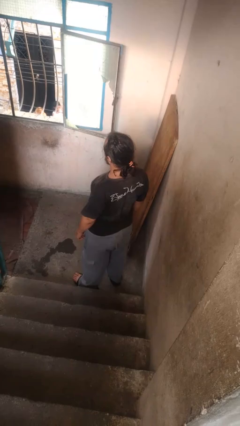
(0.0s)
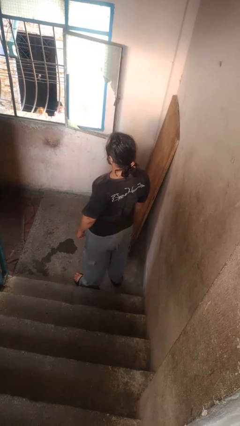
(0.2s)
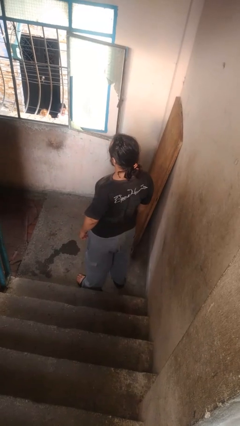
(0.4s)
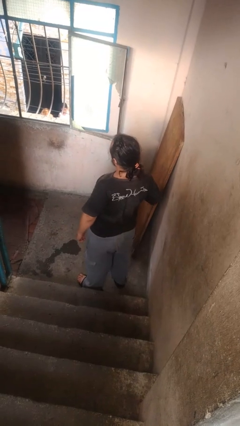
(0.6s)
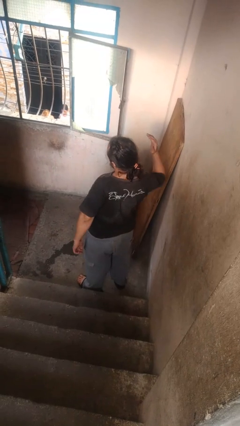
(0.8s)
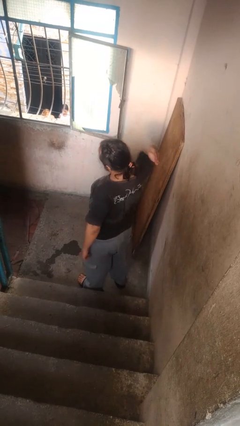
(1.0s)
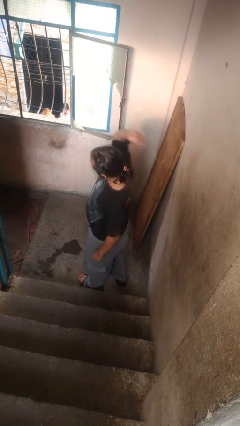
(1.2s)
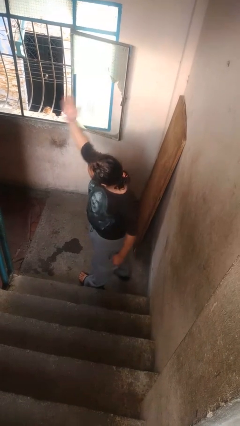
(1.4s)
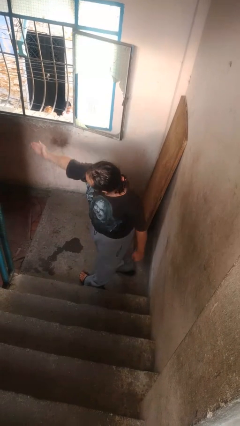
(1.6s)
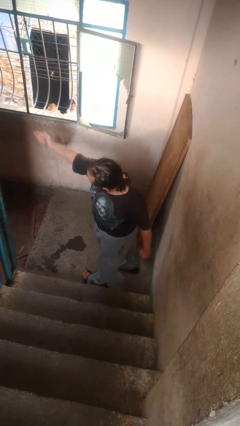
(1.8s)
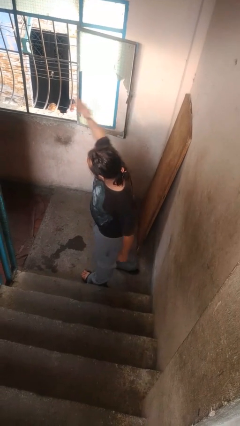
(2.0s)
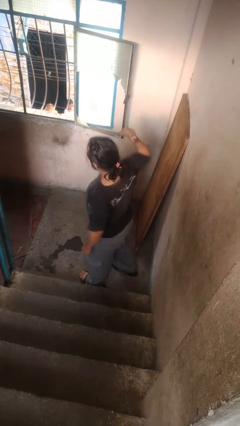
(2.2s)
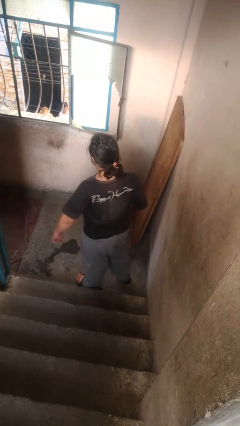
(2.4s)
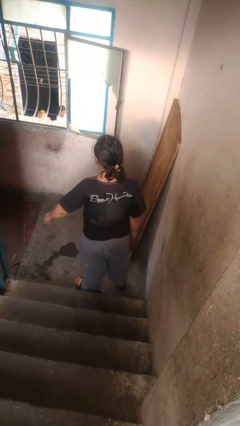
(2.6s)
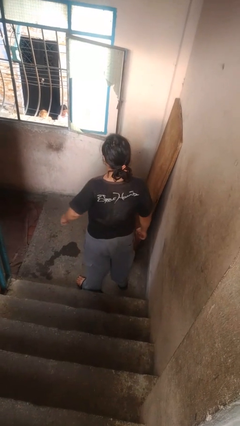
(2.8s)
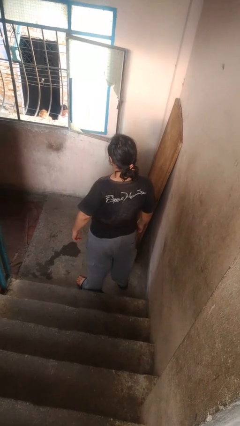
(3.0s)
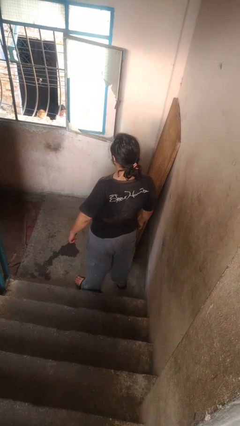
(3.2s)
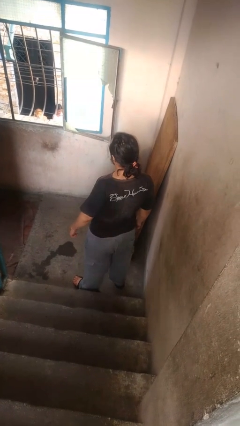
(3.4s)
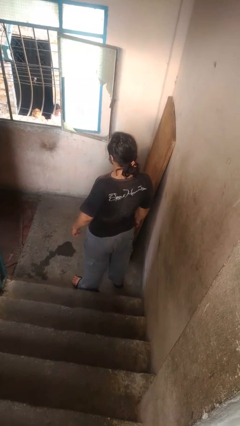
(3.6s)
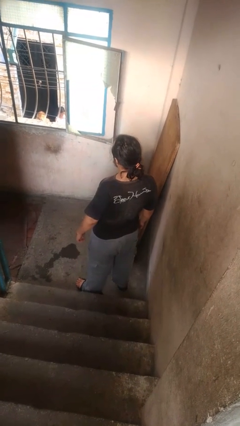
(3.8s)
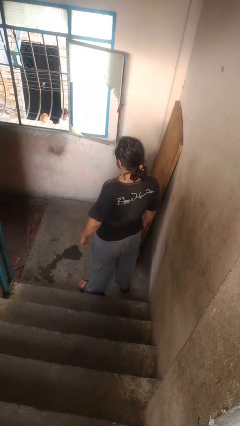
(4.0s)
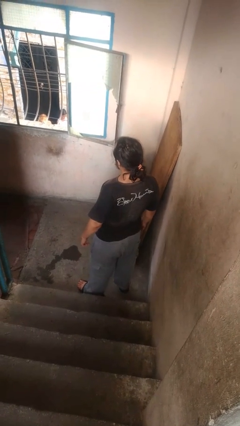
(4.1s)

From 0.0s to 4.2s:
person karate chop

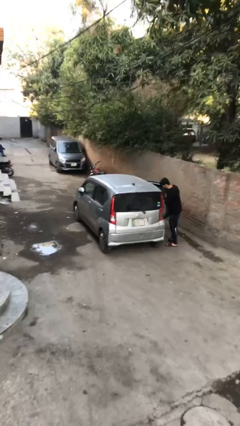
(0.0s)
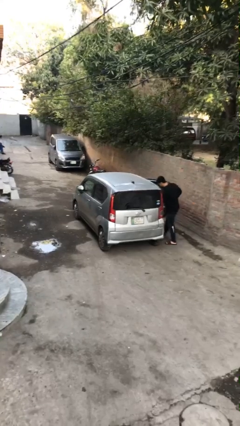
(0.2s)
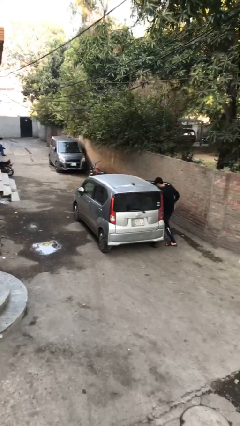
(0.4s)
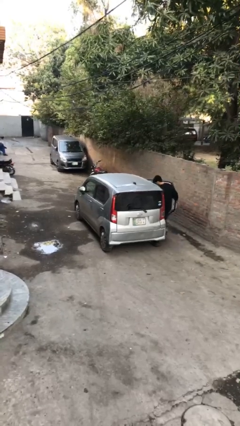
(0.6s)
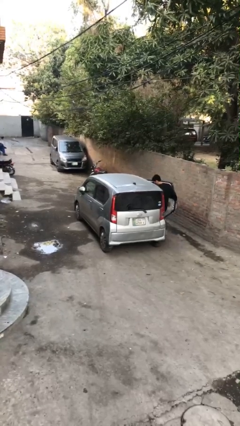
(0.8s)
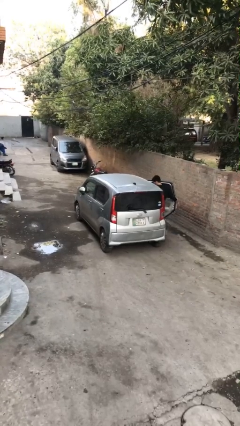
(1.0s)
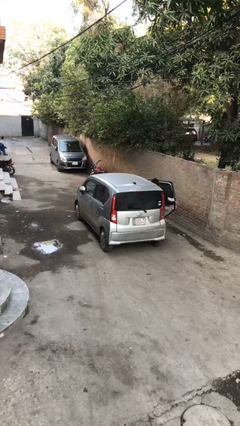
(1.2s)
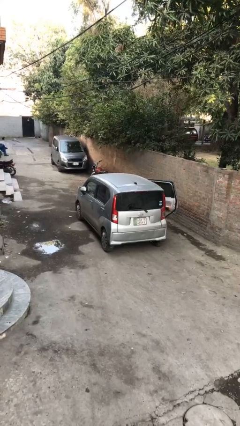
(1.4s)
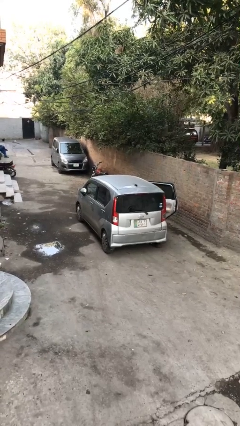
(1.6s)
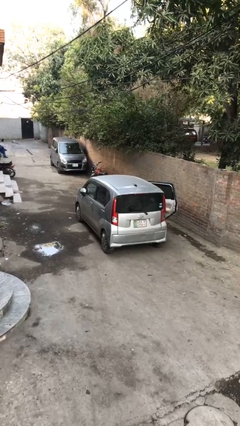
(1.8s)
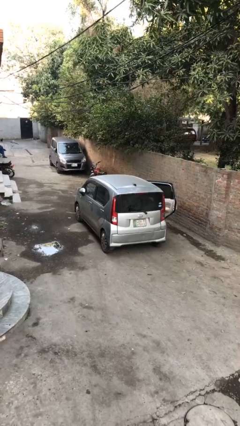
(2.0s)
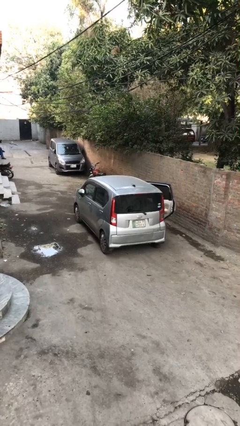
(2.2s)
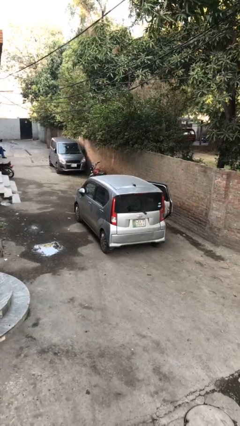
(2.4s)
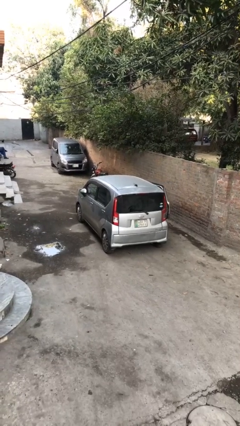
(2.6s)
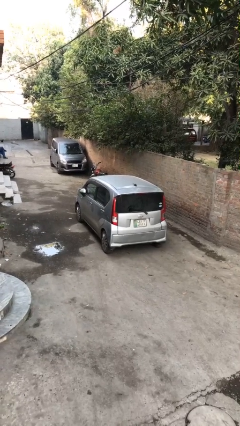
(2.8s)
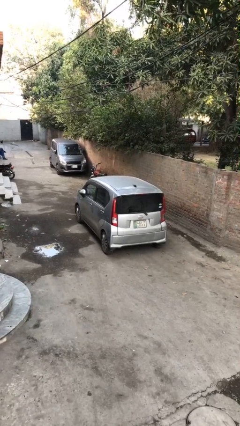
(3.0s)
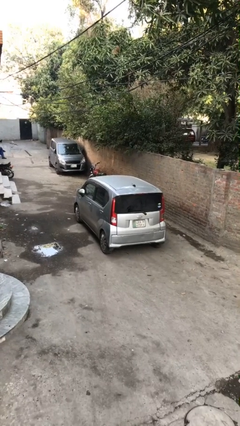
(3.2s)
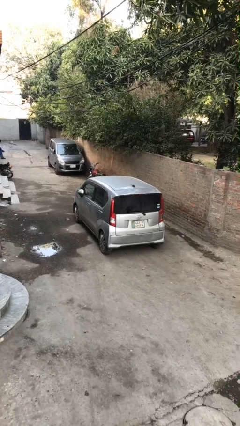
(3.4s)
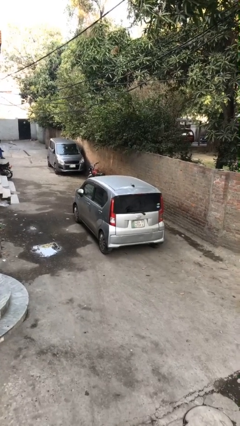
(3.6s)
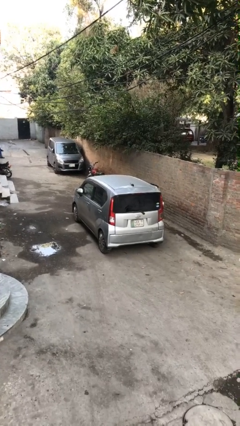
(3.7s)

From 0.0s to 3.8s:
car picks up person

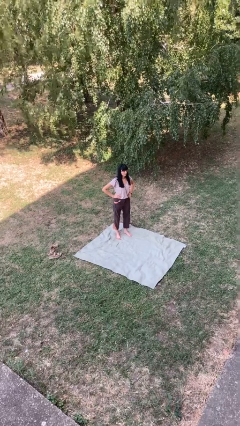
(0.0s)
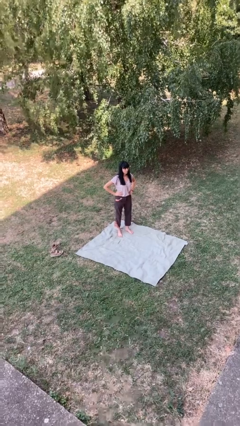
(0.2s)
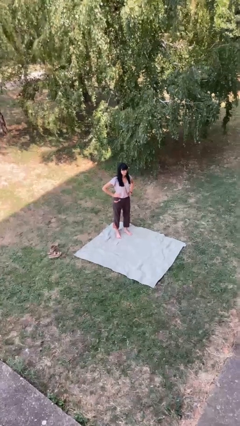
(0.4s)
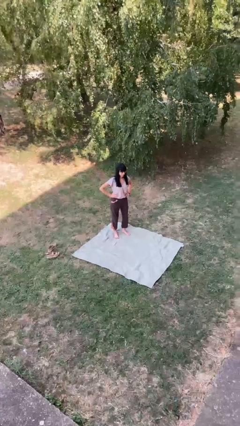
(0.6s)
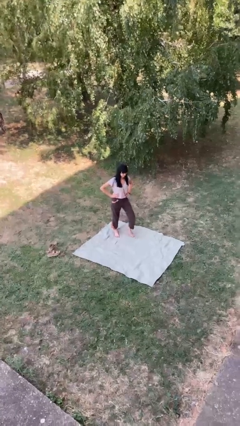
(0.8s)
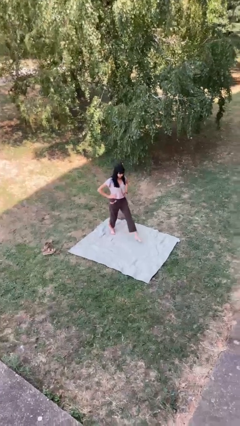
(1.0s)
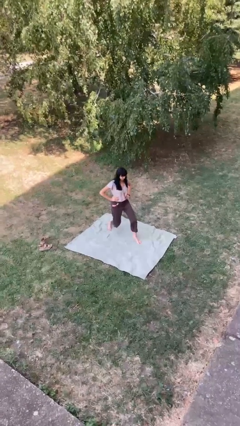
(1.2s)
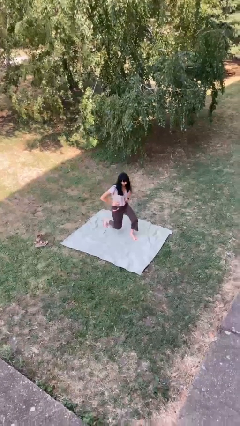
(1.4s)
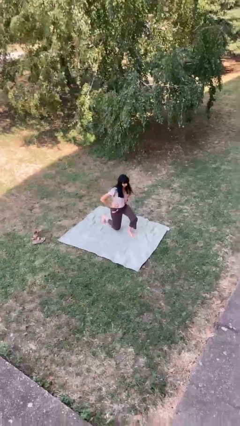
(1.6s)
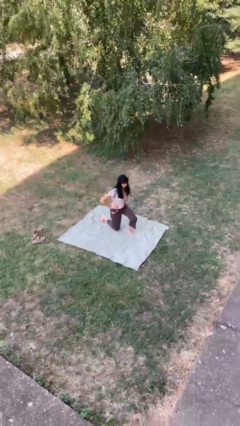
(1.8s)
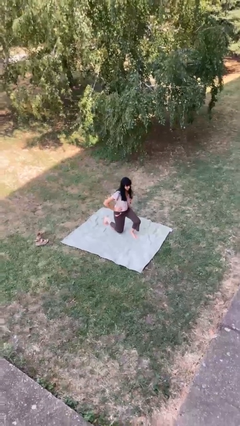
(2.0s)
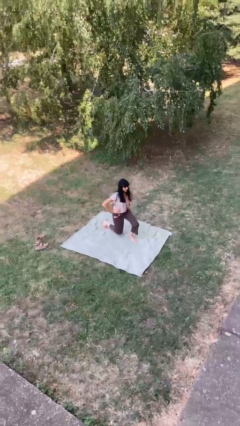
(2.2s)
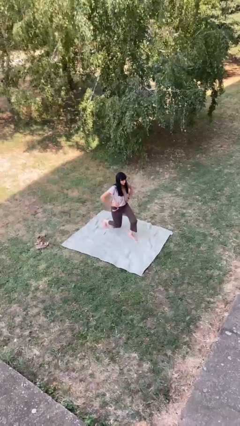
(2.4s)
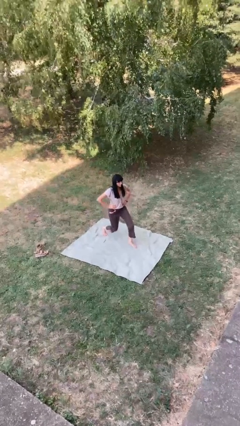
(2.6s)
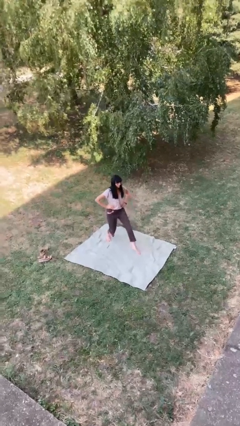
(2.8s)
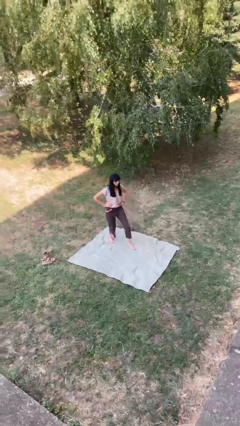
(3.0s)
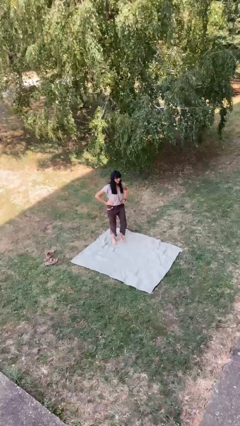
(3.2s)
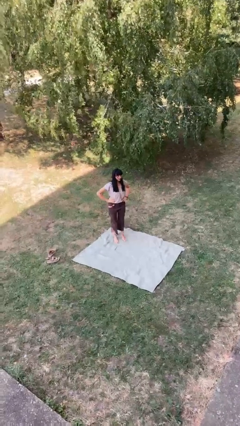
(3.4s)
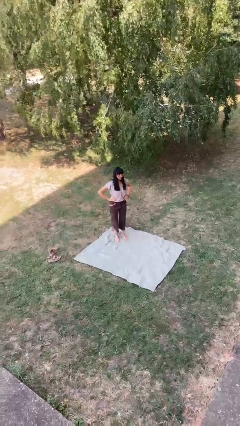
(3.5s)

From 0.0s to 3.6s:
person exercises with lunges

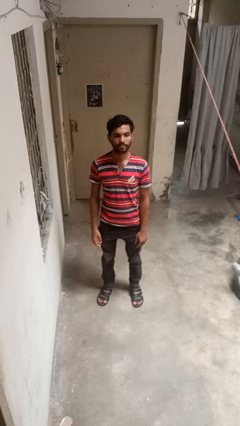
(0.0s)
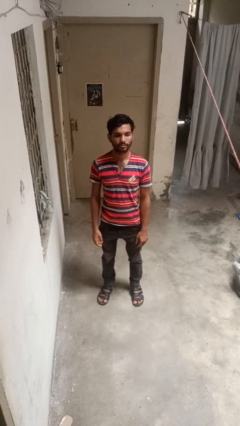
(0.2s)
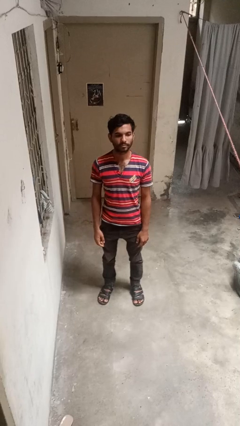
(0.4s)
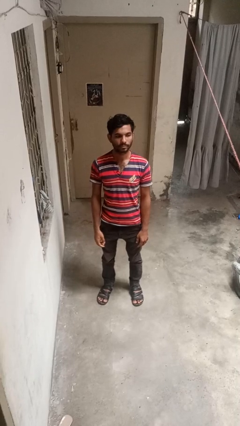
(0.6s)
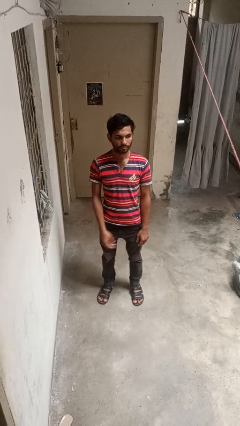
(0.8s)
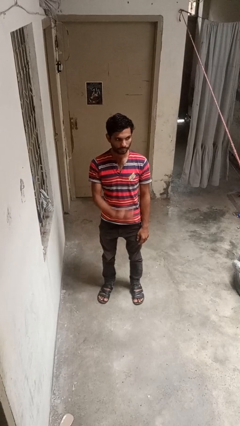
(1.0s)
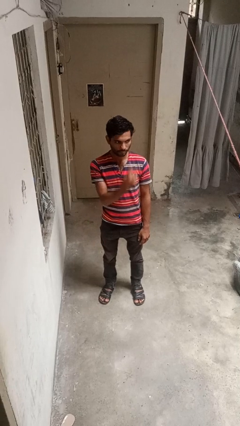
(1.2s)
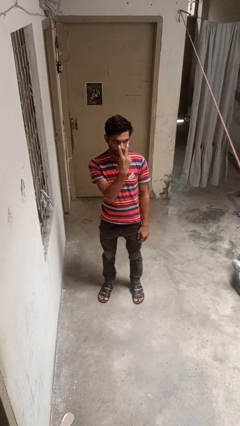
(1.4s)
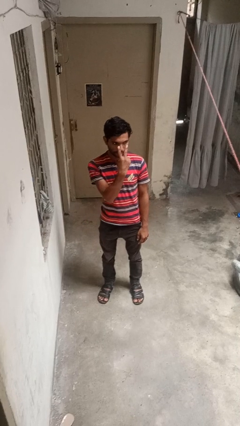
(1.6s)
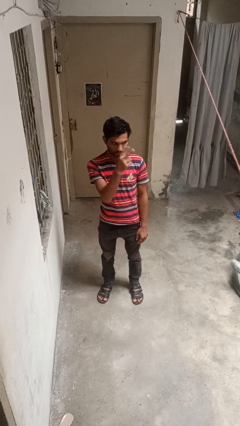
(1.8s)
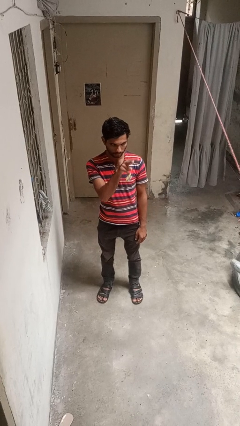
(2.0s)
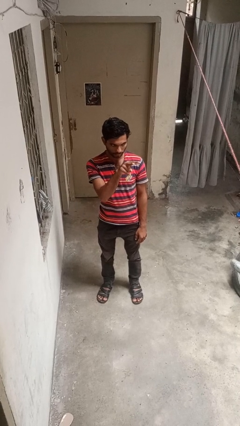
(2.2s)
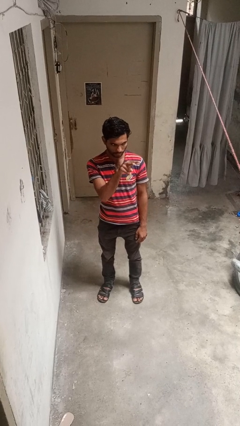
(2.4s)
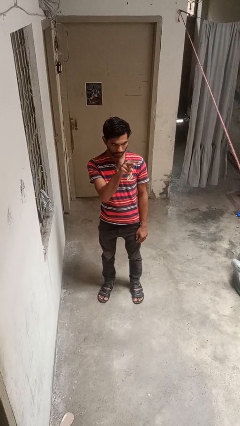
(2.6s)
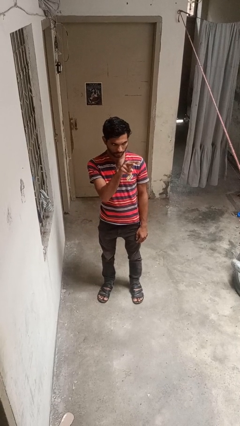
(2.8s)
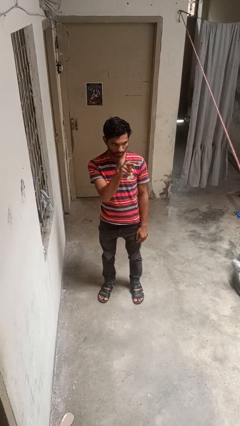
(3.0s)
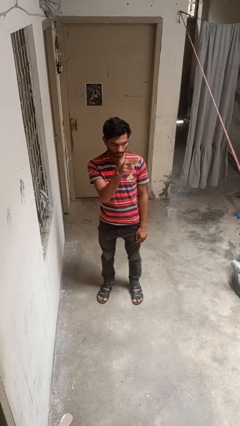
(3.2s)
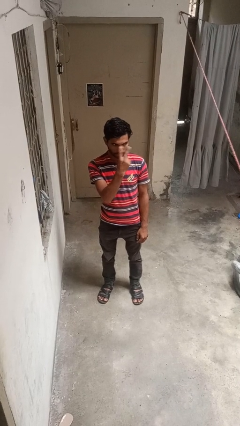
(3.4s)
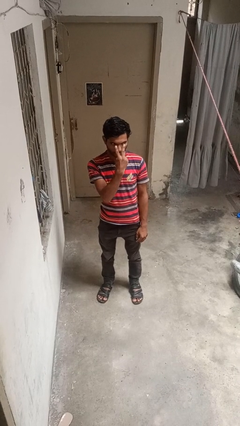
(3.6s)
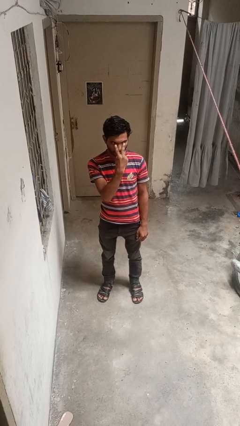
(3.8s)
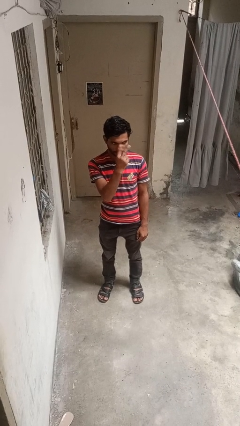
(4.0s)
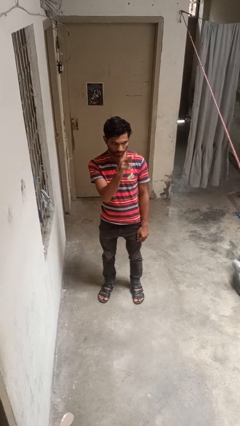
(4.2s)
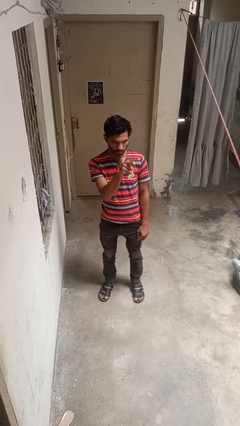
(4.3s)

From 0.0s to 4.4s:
person gestures watch closely

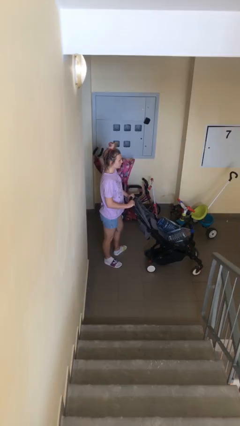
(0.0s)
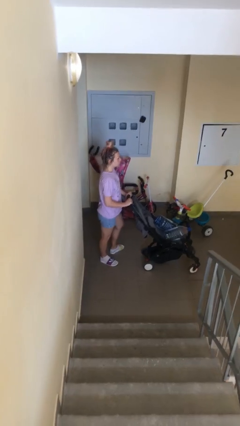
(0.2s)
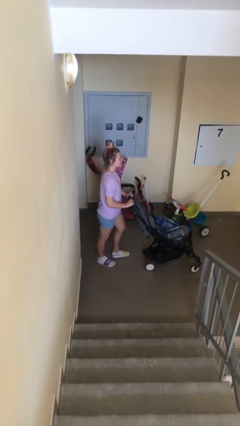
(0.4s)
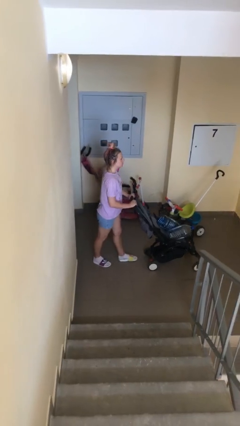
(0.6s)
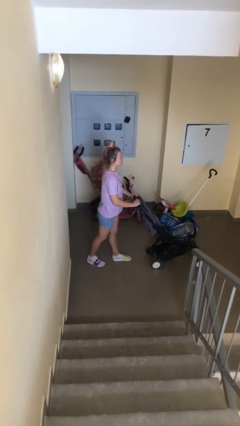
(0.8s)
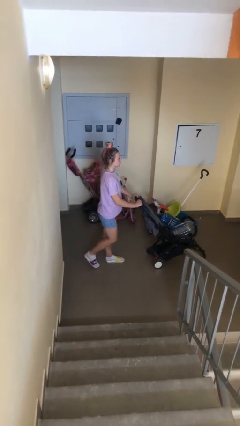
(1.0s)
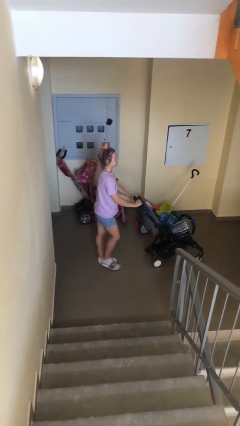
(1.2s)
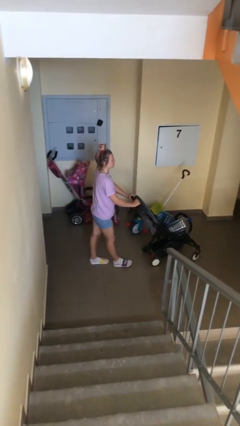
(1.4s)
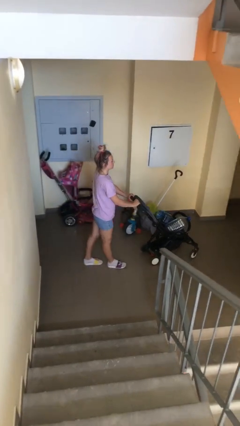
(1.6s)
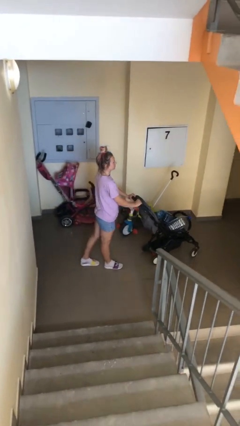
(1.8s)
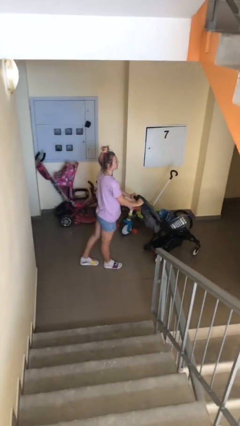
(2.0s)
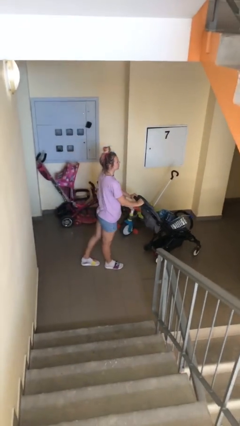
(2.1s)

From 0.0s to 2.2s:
person pushes wheeled cart
